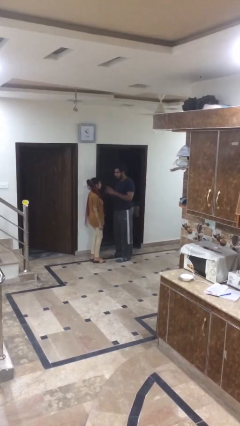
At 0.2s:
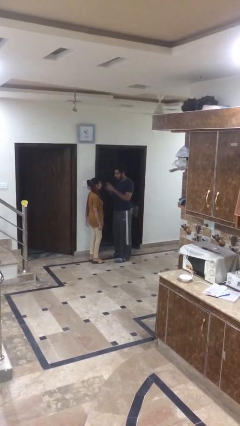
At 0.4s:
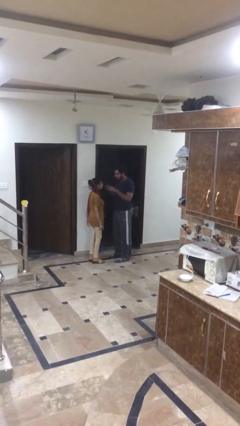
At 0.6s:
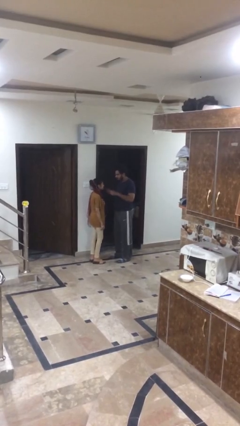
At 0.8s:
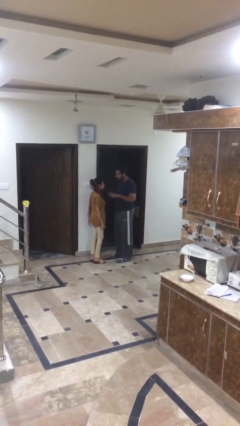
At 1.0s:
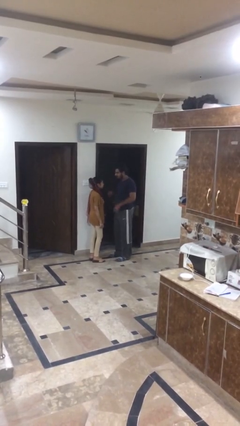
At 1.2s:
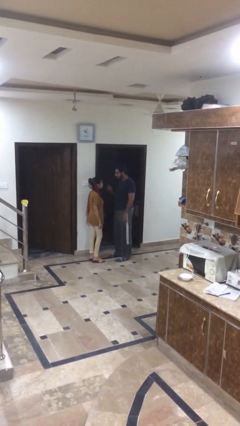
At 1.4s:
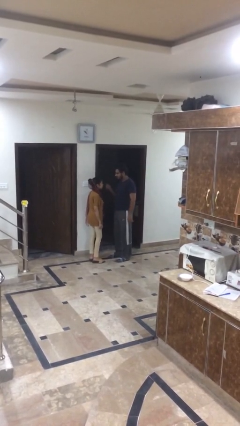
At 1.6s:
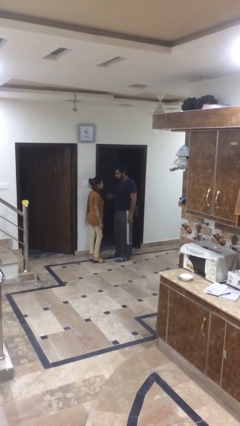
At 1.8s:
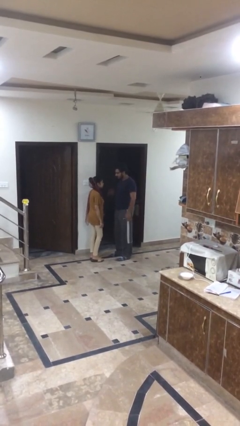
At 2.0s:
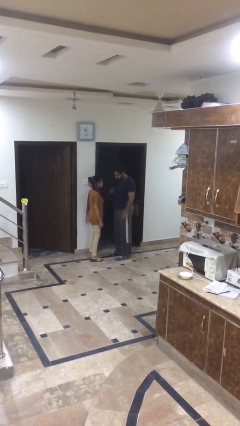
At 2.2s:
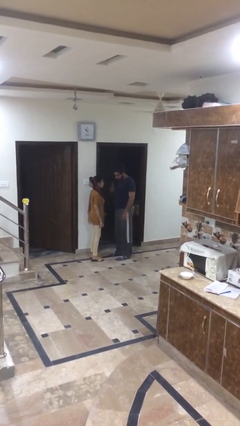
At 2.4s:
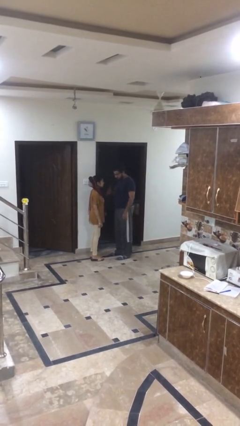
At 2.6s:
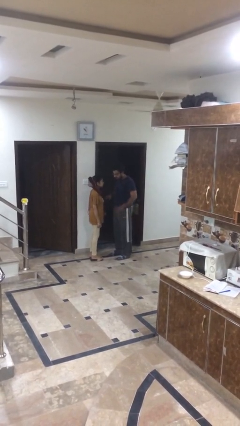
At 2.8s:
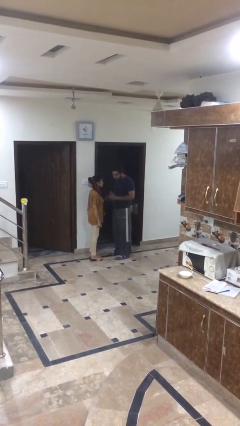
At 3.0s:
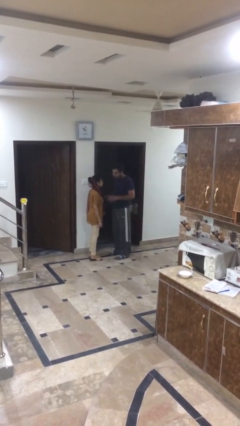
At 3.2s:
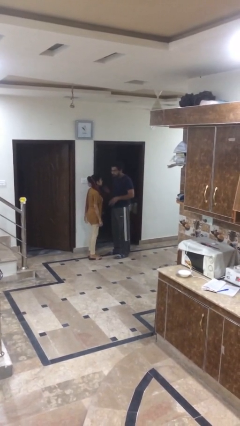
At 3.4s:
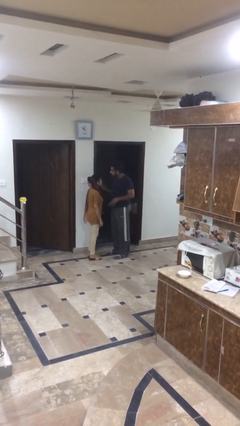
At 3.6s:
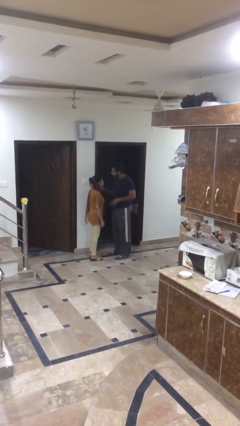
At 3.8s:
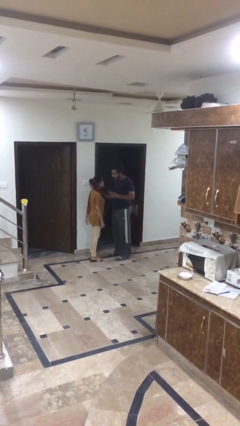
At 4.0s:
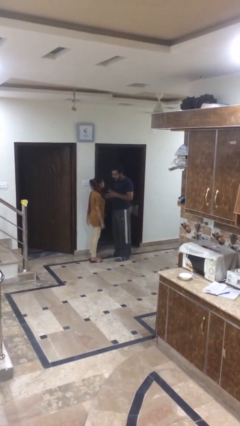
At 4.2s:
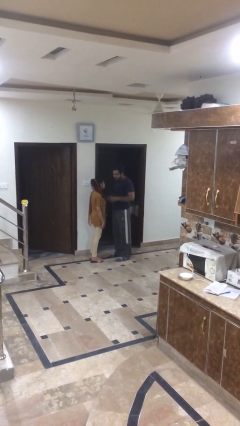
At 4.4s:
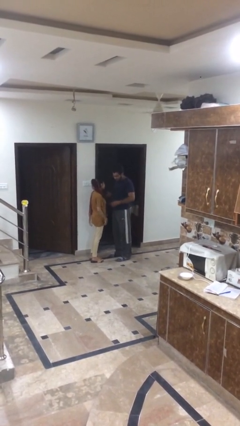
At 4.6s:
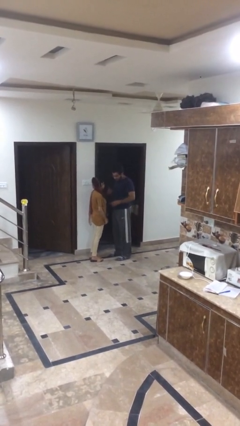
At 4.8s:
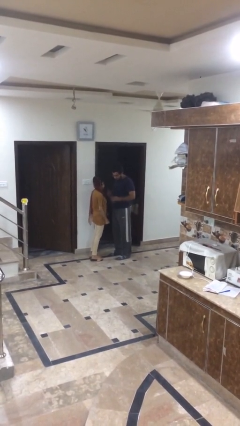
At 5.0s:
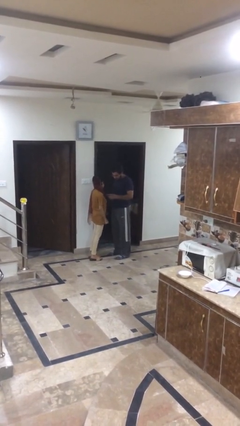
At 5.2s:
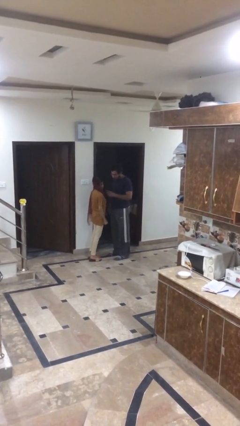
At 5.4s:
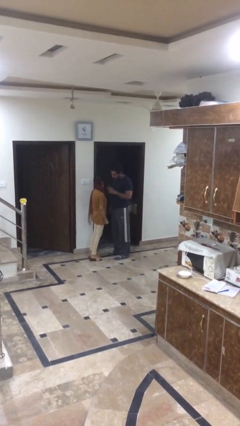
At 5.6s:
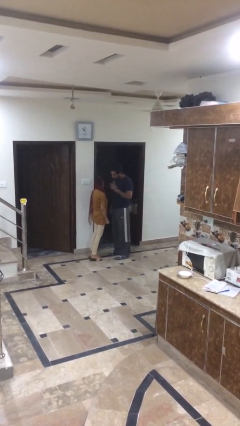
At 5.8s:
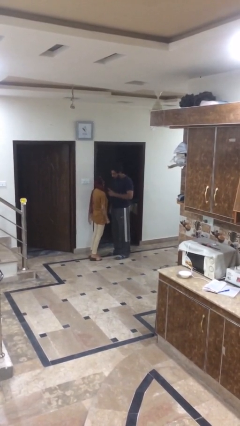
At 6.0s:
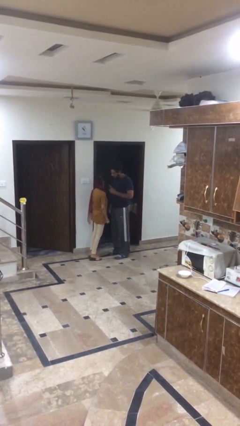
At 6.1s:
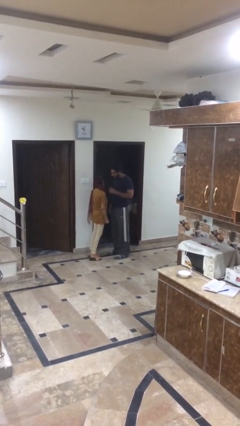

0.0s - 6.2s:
person talks to person

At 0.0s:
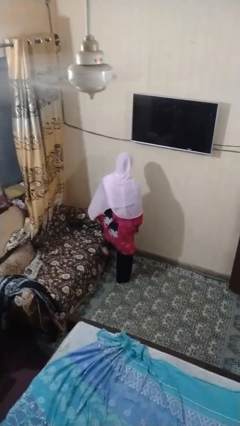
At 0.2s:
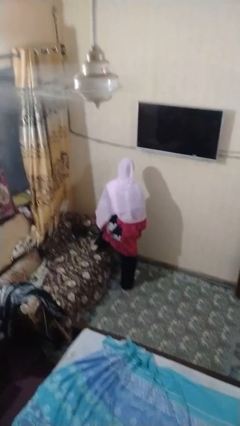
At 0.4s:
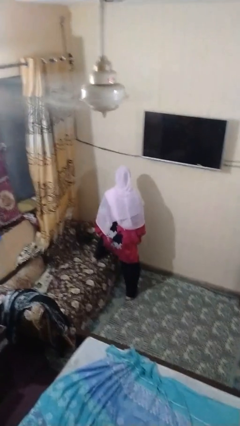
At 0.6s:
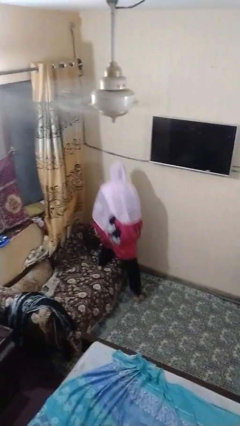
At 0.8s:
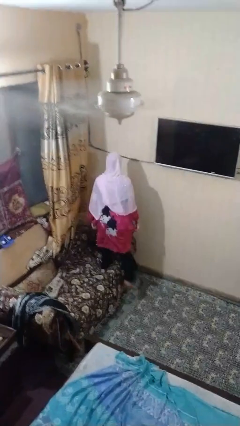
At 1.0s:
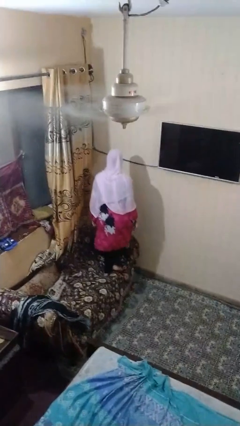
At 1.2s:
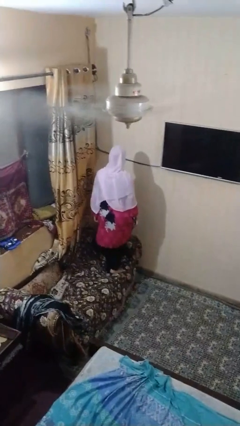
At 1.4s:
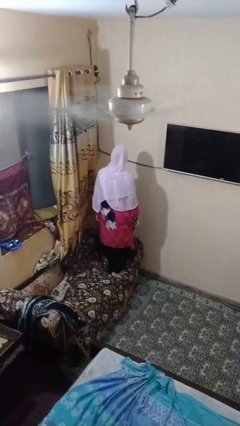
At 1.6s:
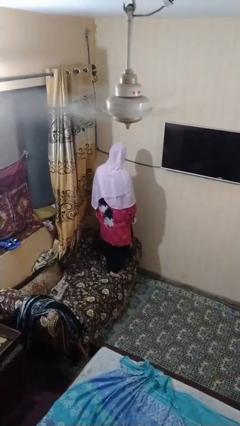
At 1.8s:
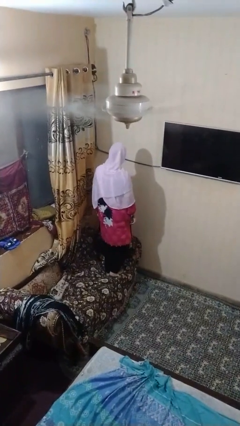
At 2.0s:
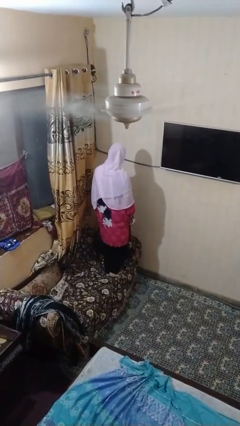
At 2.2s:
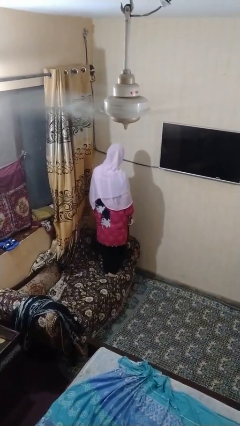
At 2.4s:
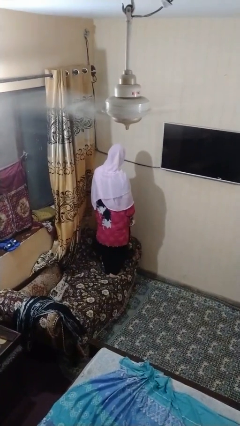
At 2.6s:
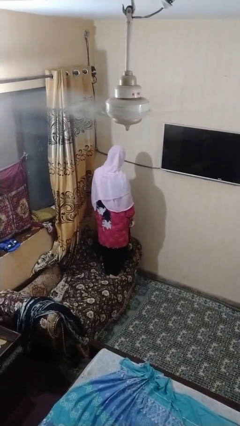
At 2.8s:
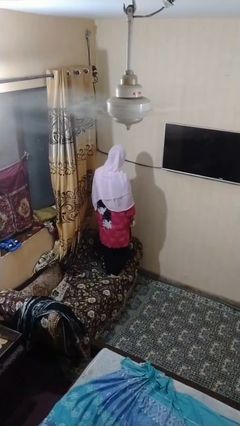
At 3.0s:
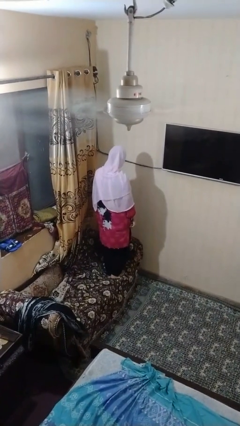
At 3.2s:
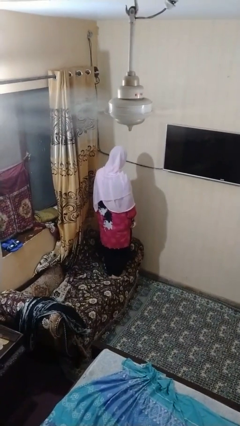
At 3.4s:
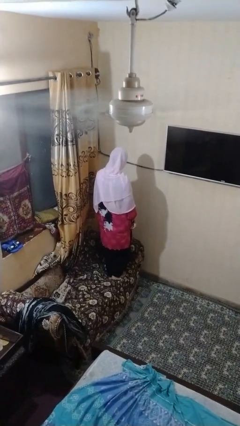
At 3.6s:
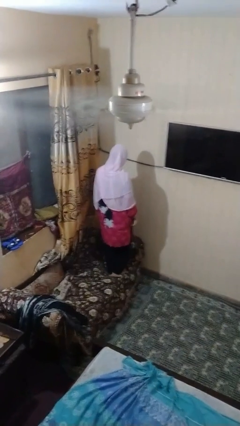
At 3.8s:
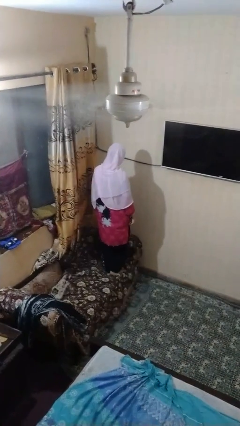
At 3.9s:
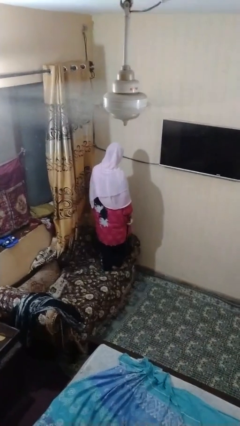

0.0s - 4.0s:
person climbs on couch

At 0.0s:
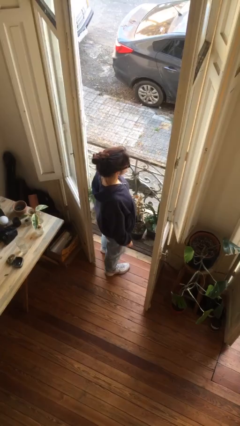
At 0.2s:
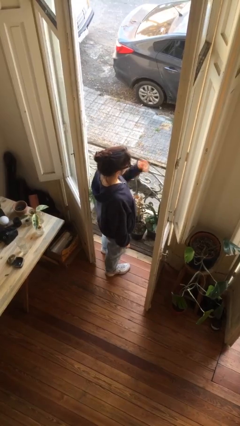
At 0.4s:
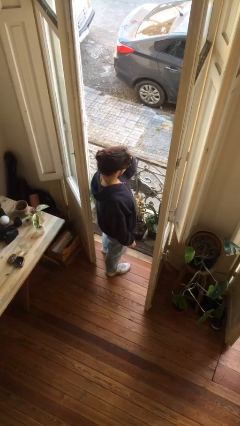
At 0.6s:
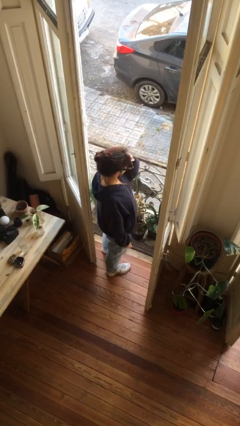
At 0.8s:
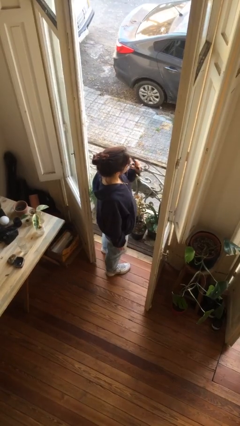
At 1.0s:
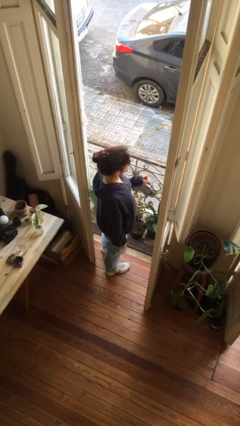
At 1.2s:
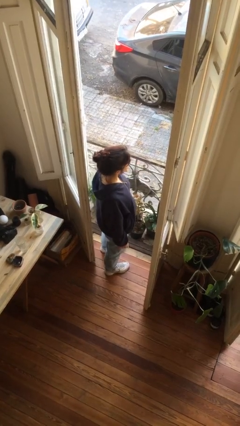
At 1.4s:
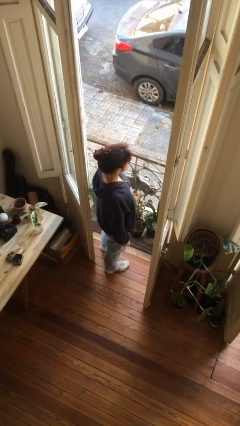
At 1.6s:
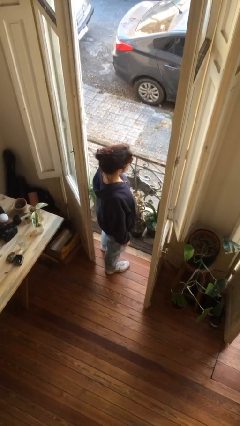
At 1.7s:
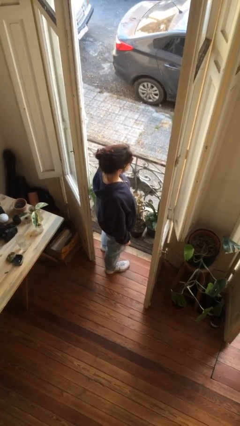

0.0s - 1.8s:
person takes off sunglasses

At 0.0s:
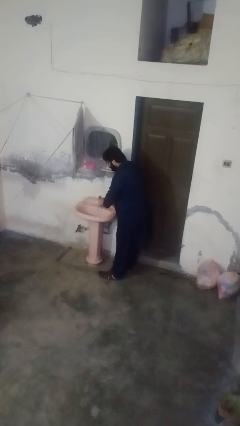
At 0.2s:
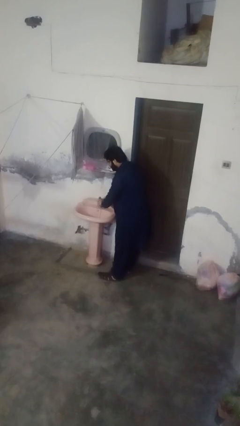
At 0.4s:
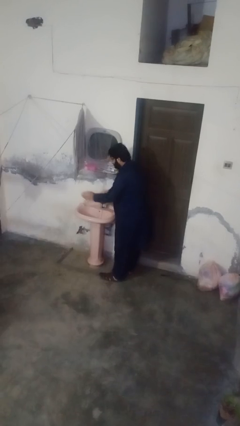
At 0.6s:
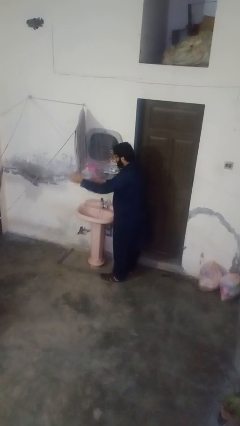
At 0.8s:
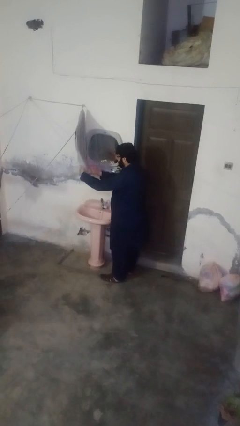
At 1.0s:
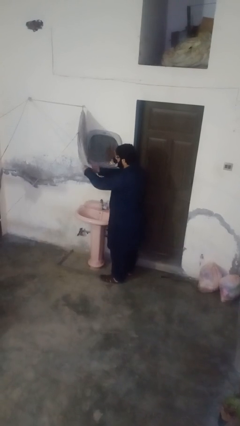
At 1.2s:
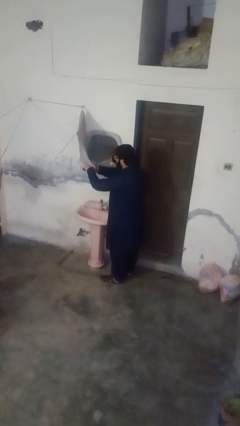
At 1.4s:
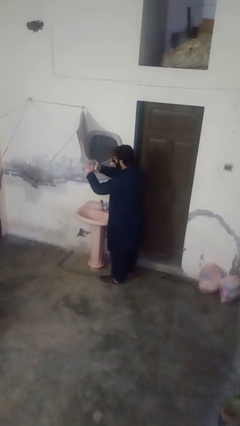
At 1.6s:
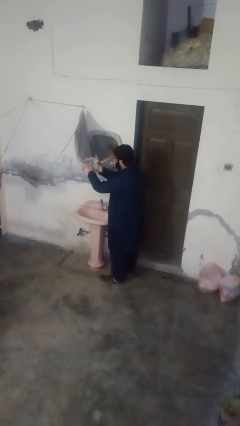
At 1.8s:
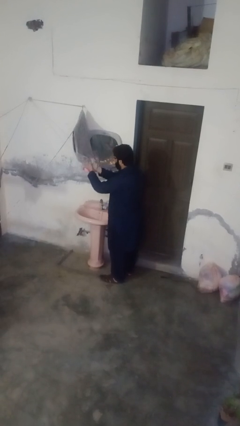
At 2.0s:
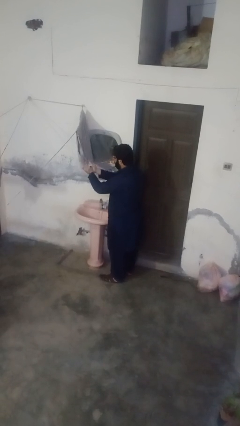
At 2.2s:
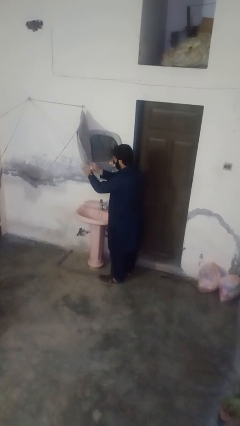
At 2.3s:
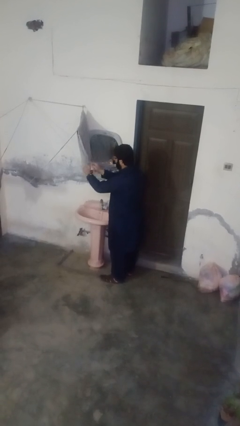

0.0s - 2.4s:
person dries hands with towel

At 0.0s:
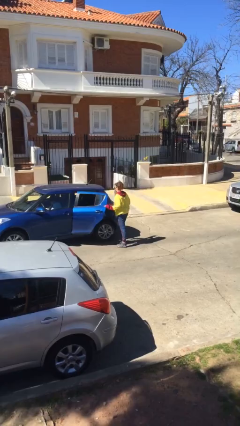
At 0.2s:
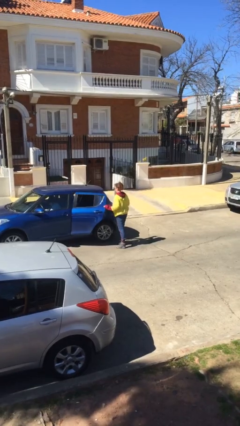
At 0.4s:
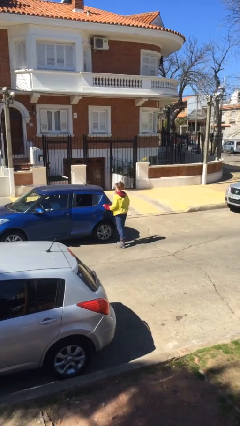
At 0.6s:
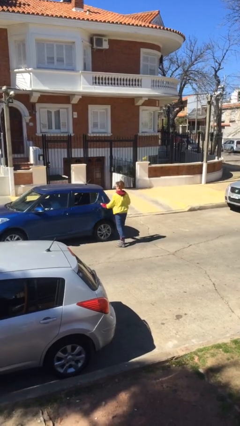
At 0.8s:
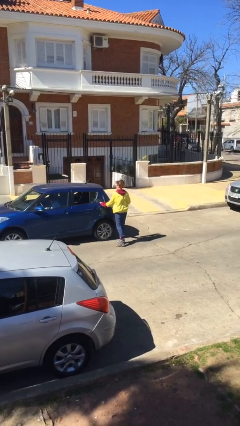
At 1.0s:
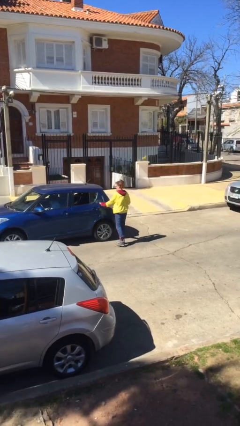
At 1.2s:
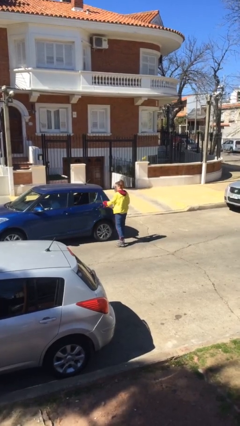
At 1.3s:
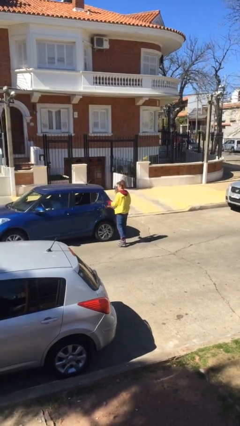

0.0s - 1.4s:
person closes car door

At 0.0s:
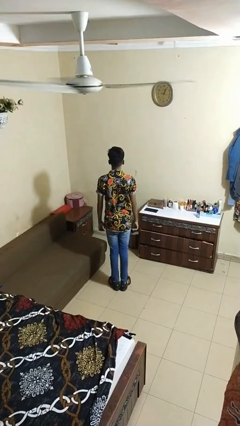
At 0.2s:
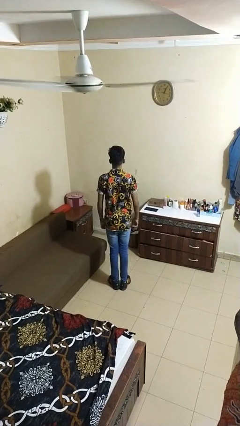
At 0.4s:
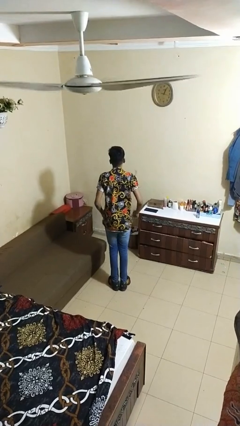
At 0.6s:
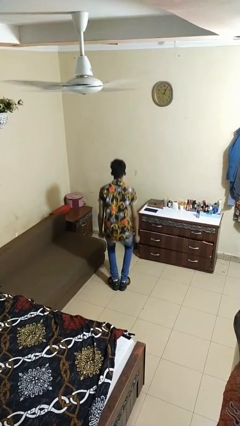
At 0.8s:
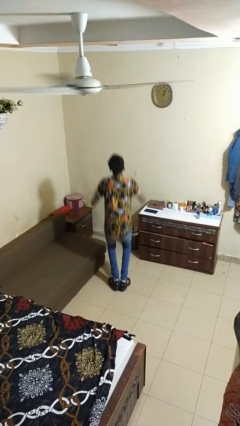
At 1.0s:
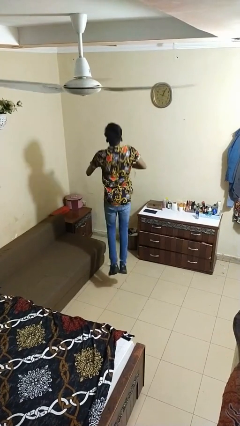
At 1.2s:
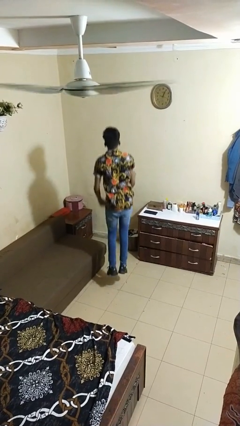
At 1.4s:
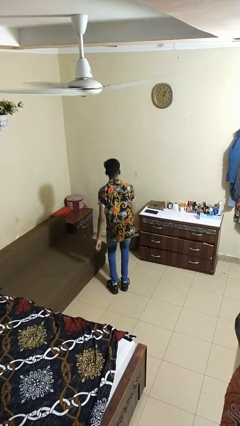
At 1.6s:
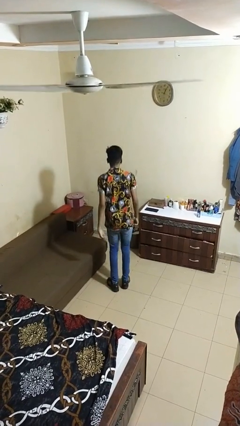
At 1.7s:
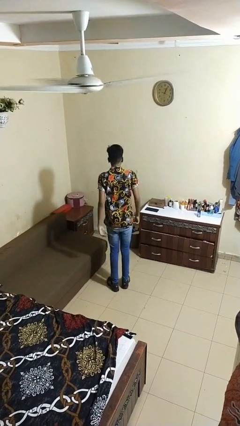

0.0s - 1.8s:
person jumps
